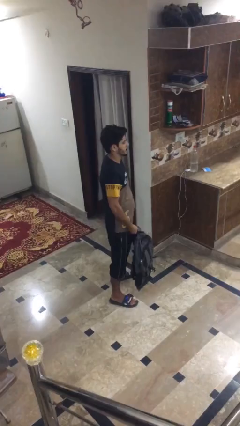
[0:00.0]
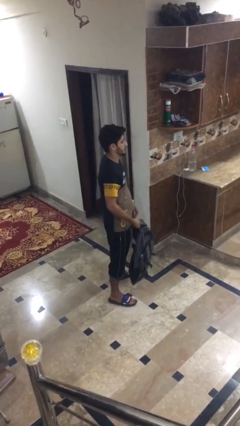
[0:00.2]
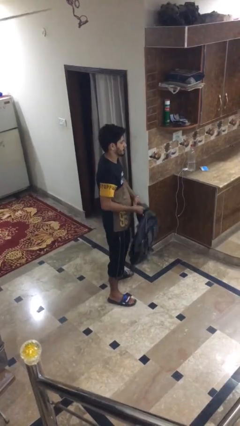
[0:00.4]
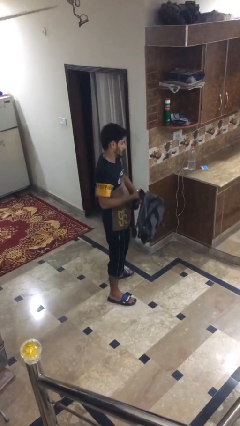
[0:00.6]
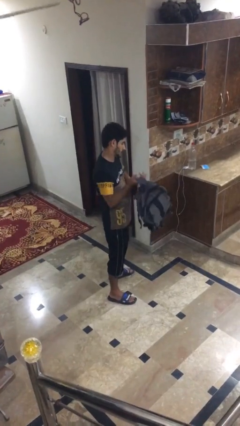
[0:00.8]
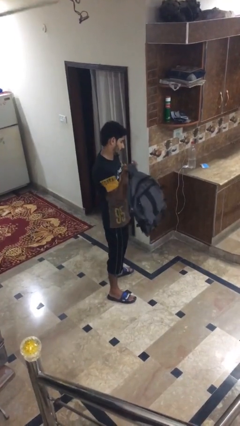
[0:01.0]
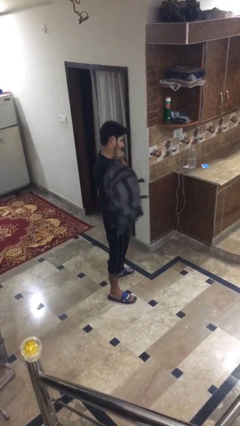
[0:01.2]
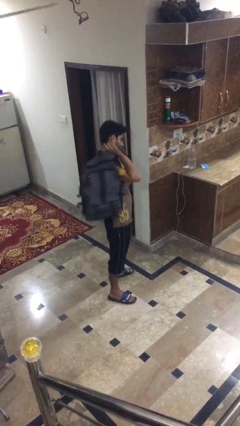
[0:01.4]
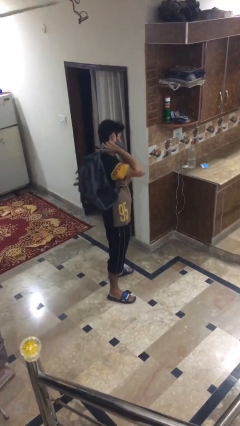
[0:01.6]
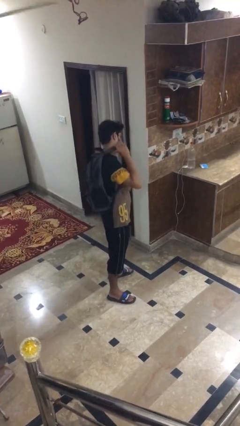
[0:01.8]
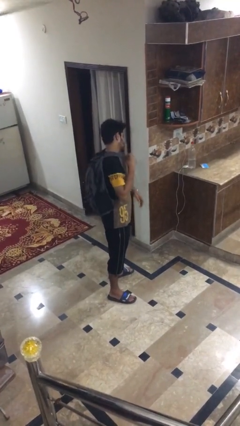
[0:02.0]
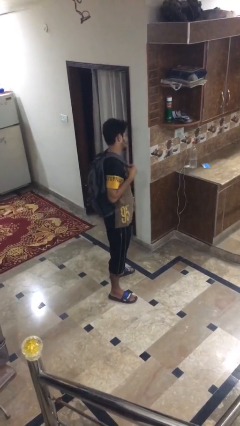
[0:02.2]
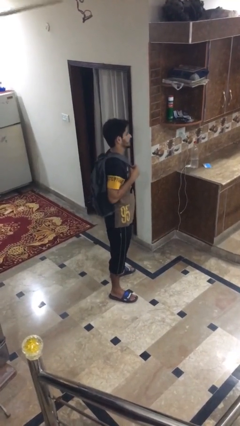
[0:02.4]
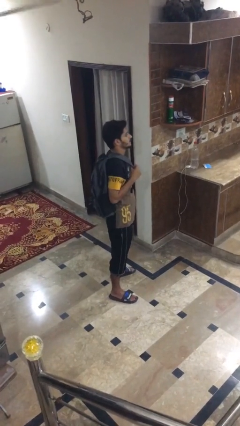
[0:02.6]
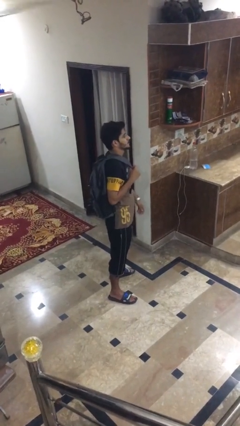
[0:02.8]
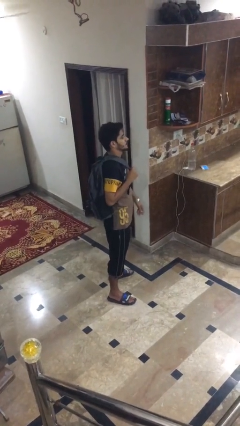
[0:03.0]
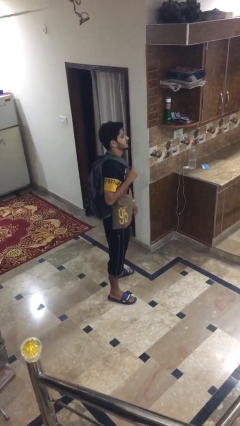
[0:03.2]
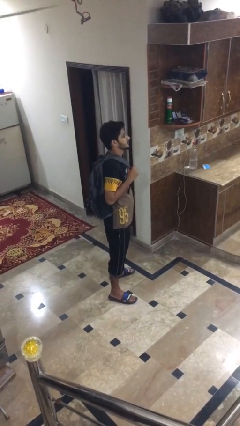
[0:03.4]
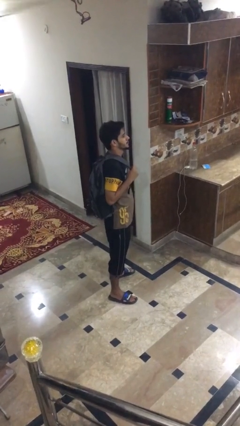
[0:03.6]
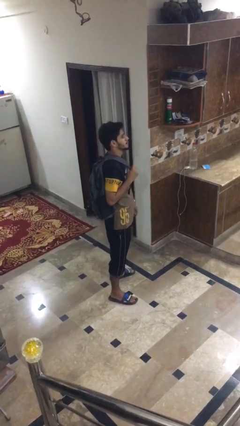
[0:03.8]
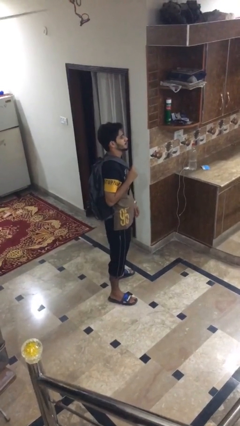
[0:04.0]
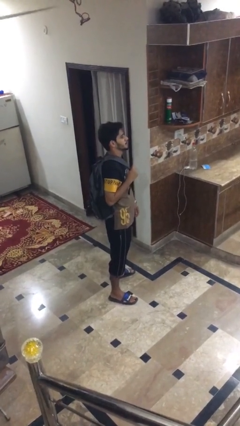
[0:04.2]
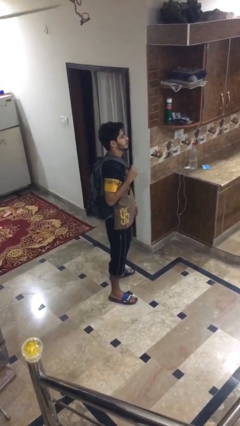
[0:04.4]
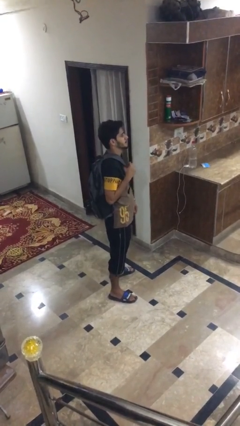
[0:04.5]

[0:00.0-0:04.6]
person puts on backpack

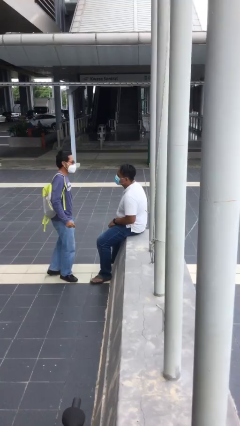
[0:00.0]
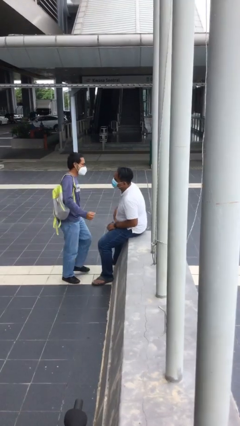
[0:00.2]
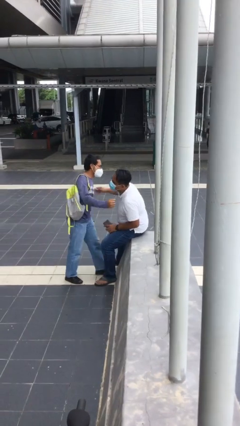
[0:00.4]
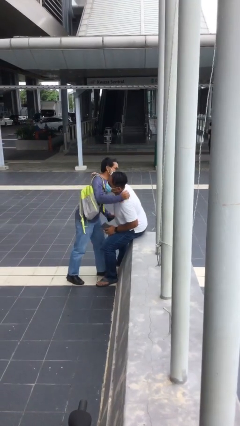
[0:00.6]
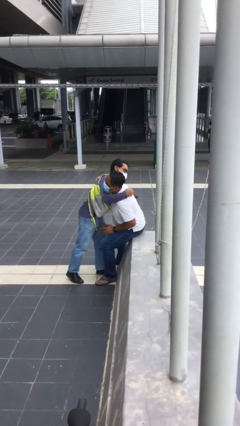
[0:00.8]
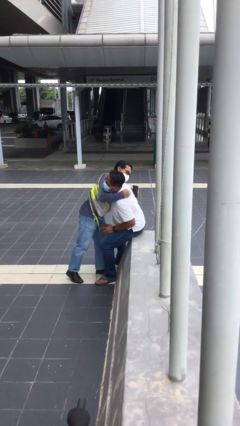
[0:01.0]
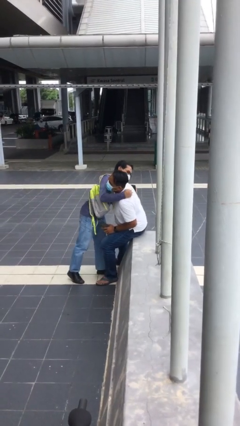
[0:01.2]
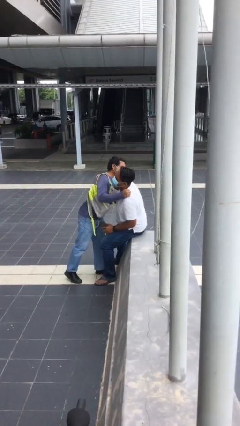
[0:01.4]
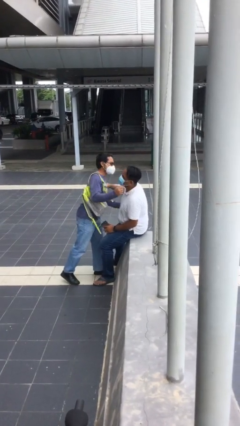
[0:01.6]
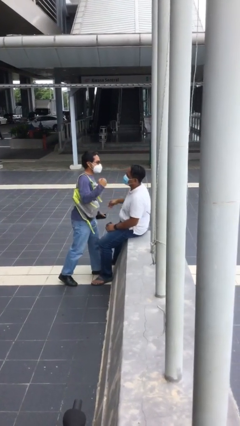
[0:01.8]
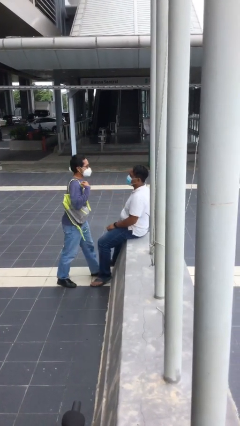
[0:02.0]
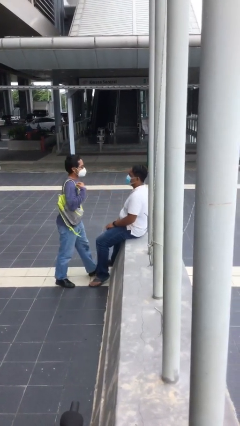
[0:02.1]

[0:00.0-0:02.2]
person embraces person

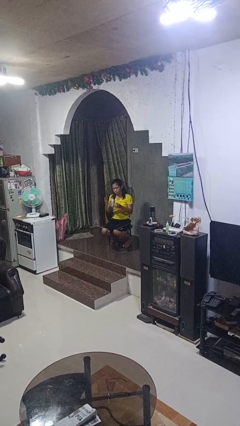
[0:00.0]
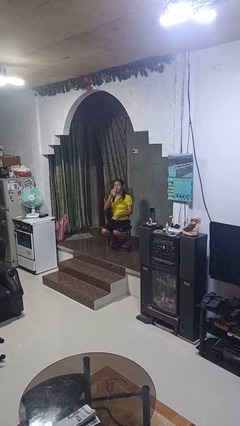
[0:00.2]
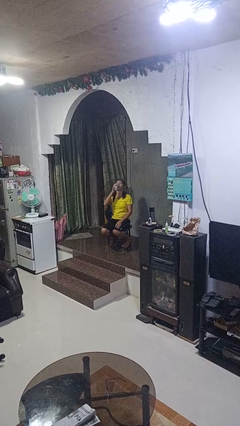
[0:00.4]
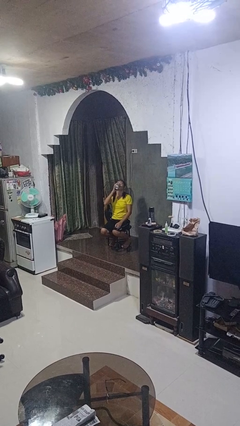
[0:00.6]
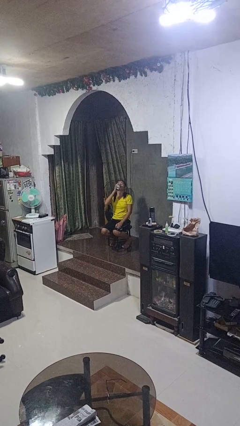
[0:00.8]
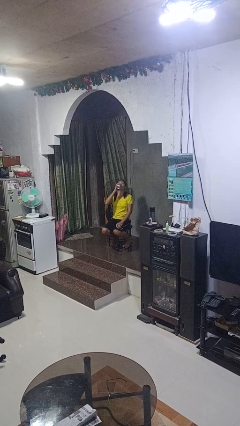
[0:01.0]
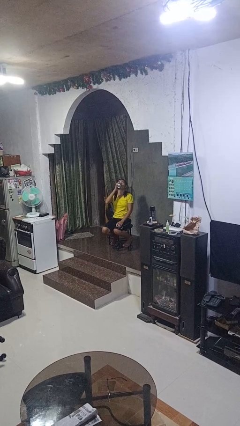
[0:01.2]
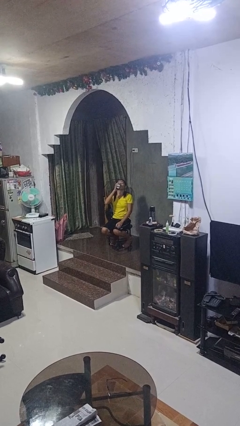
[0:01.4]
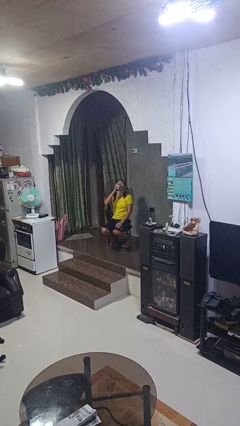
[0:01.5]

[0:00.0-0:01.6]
person drinks from beverage can

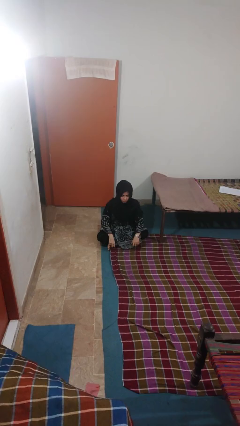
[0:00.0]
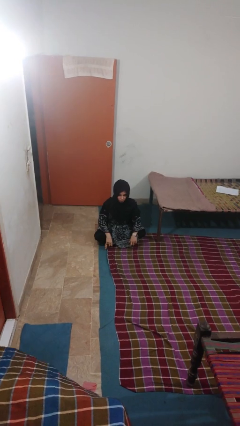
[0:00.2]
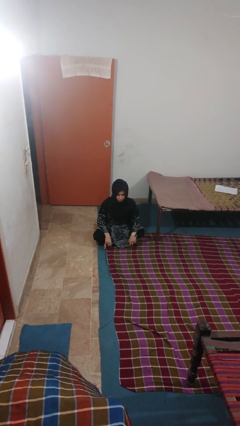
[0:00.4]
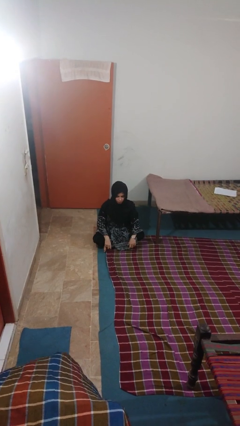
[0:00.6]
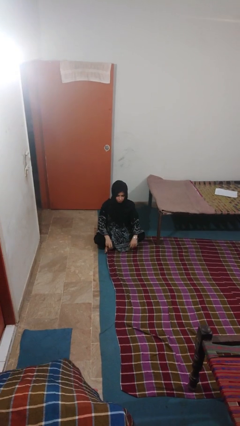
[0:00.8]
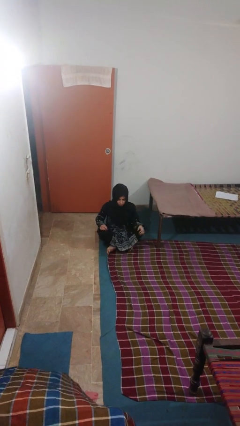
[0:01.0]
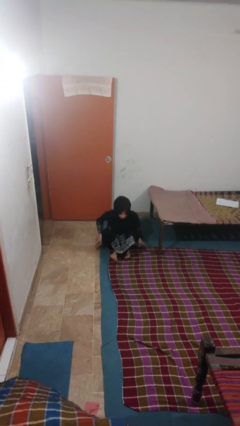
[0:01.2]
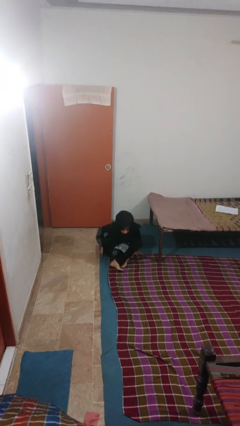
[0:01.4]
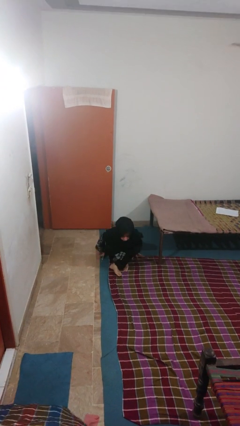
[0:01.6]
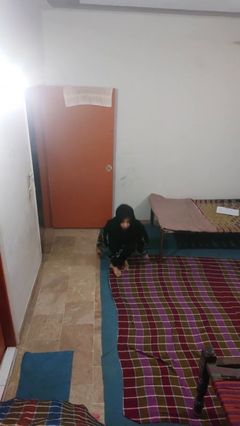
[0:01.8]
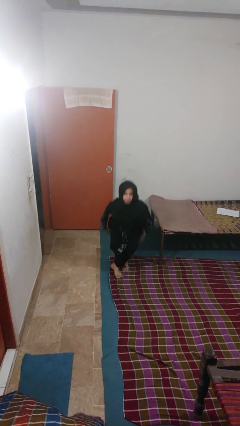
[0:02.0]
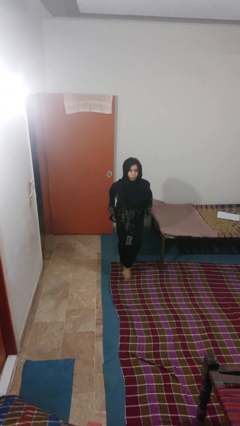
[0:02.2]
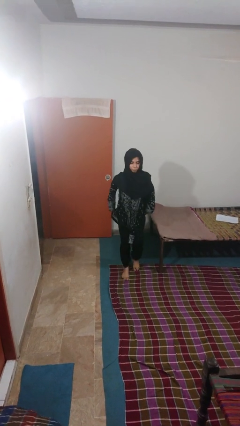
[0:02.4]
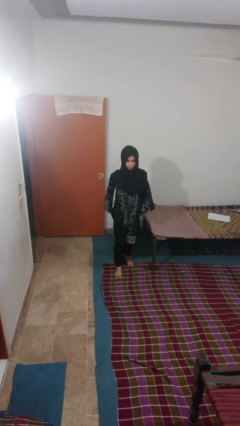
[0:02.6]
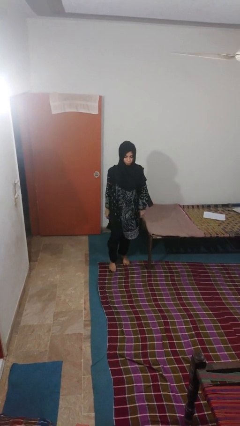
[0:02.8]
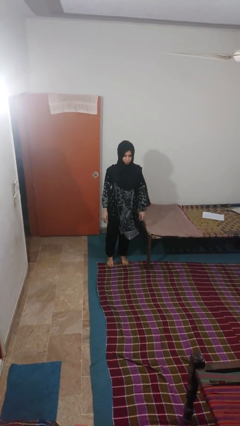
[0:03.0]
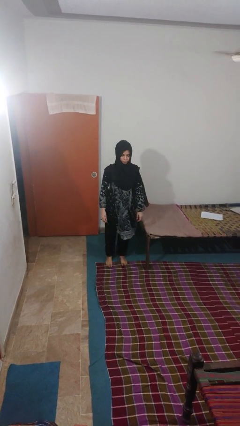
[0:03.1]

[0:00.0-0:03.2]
person stands up from floor

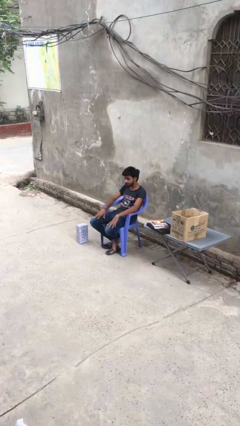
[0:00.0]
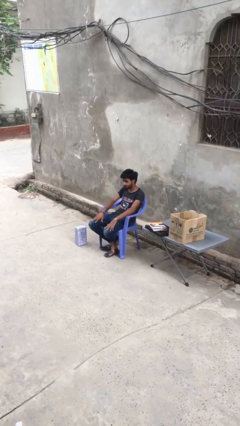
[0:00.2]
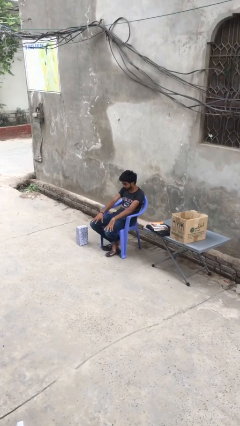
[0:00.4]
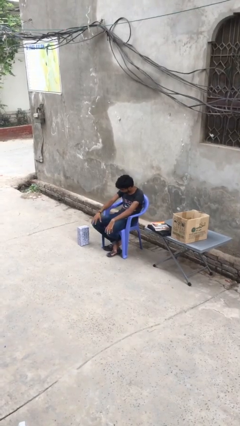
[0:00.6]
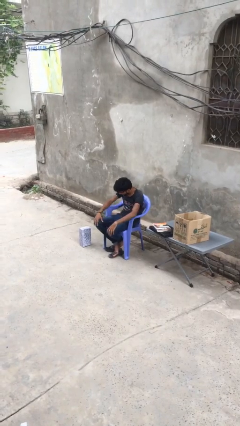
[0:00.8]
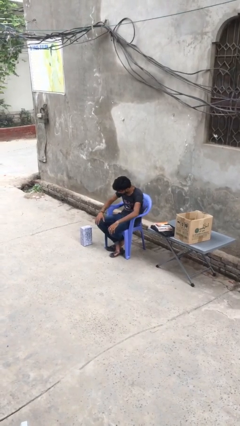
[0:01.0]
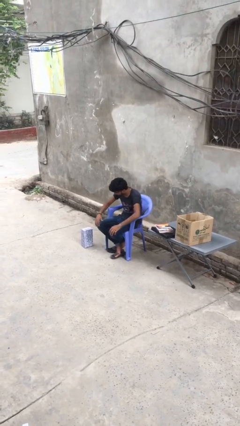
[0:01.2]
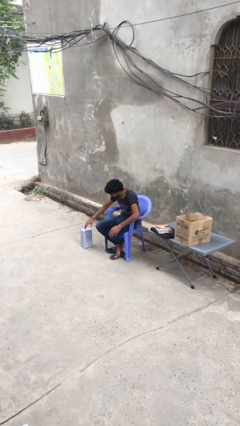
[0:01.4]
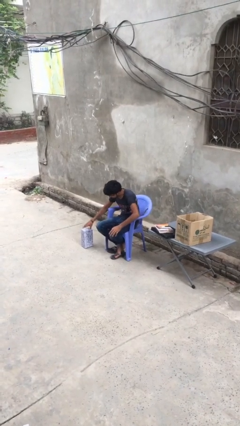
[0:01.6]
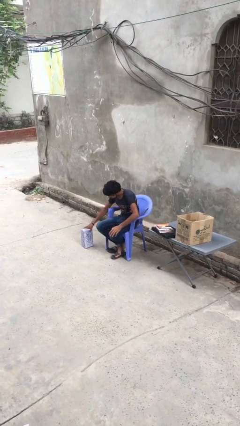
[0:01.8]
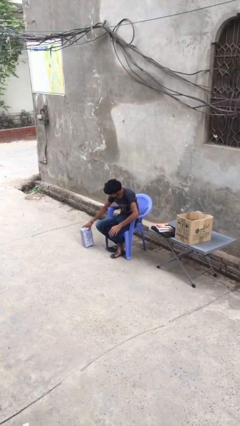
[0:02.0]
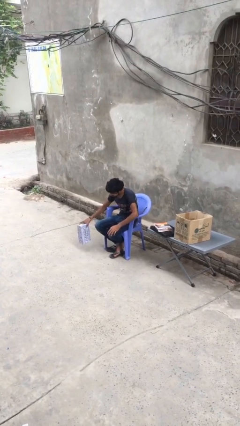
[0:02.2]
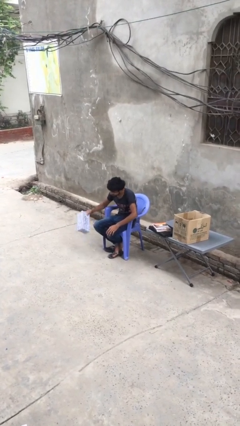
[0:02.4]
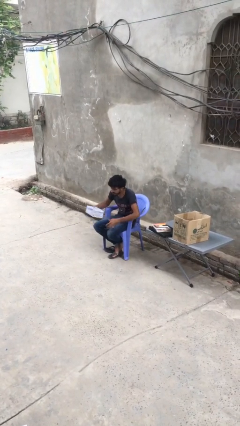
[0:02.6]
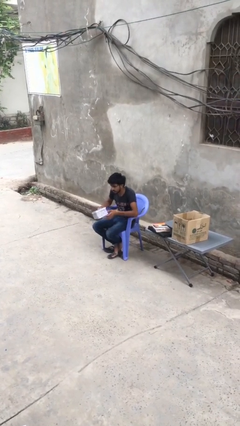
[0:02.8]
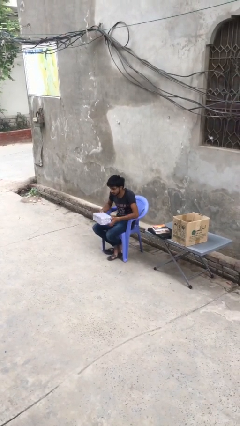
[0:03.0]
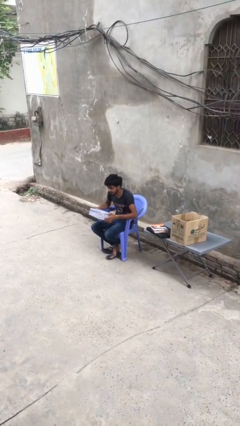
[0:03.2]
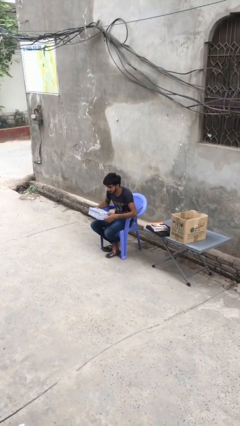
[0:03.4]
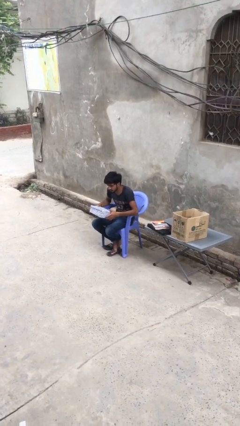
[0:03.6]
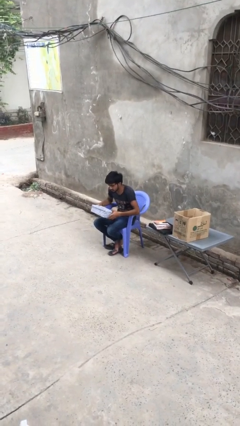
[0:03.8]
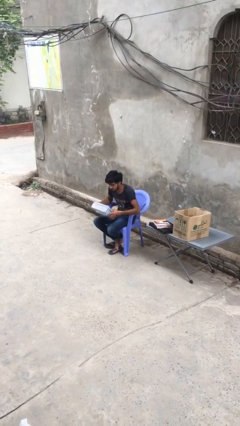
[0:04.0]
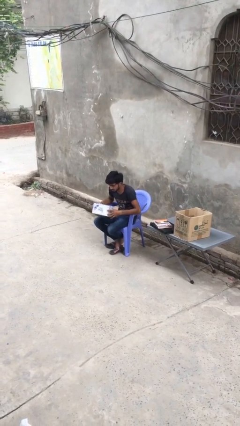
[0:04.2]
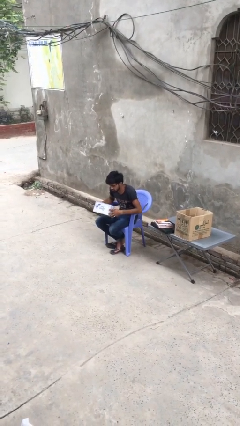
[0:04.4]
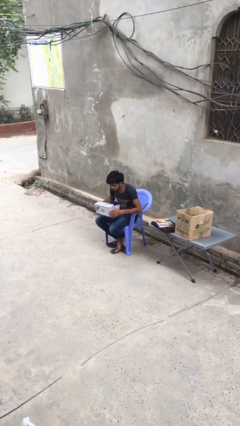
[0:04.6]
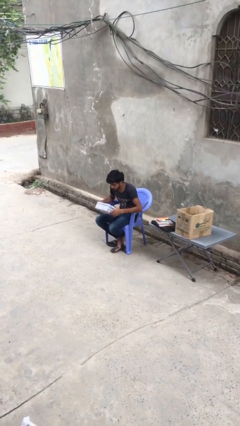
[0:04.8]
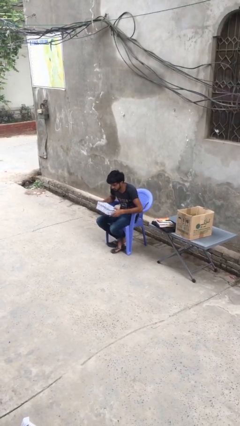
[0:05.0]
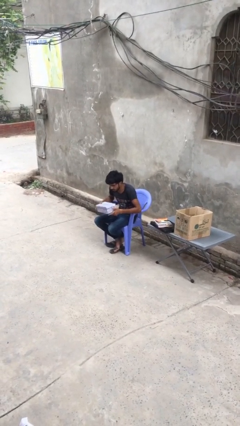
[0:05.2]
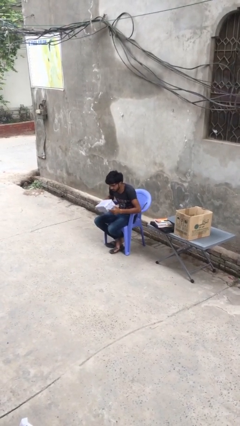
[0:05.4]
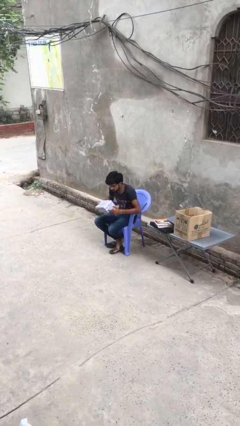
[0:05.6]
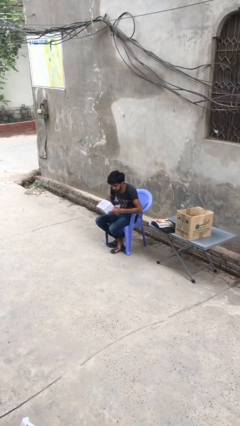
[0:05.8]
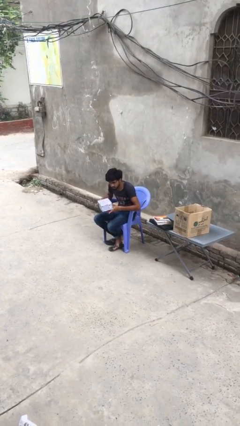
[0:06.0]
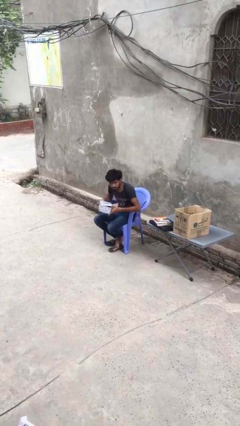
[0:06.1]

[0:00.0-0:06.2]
person picks up object from floor
